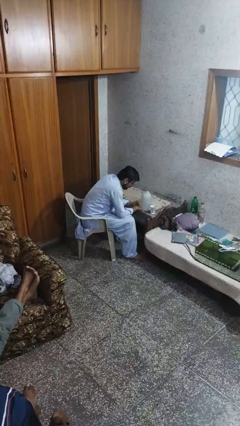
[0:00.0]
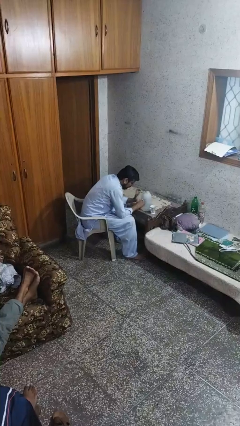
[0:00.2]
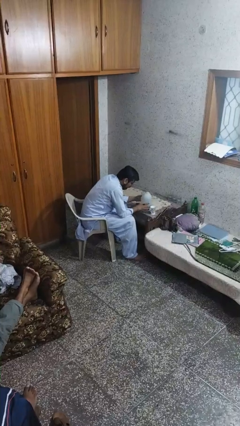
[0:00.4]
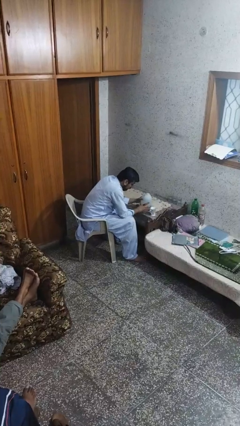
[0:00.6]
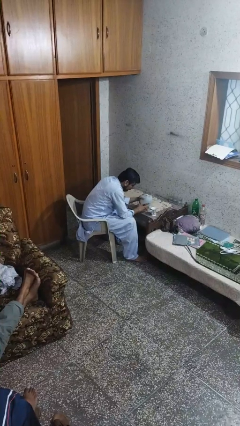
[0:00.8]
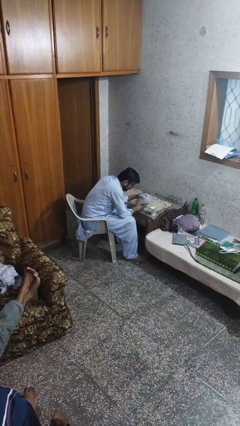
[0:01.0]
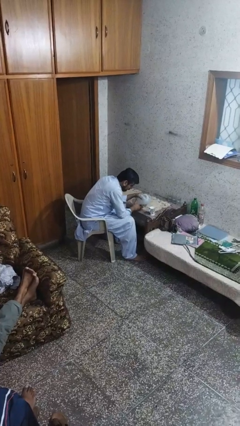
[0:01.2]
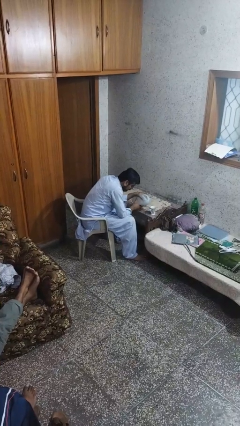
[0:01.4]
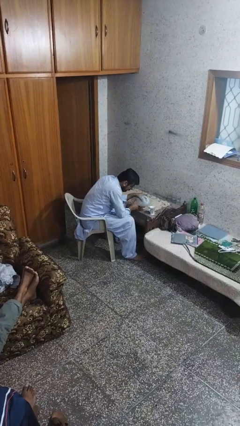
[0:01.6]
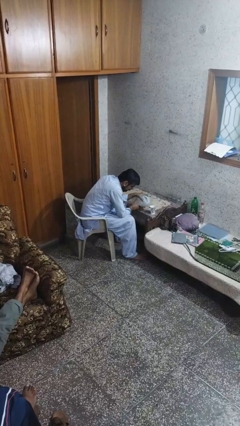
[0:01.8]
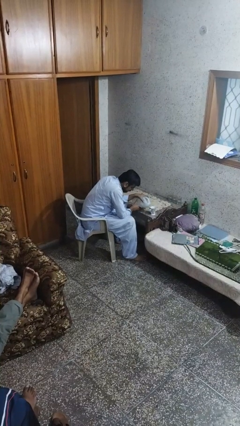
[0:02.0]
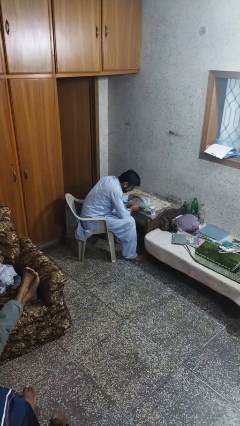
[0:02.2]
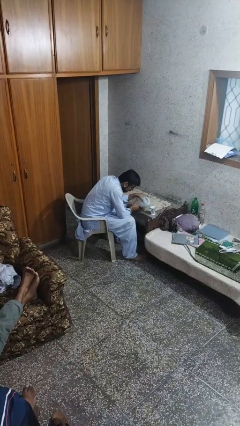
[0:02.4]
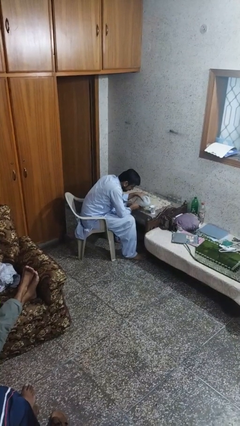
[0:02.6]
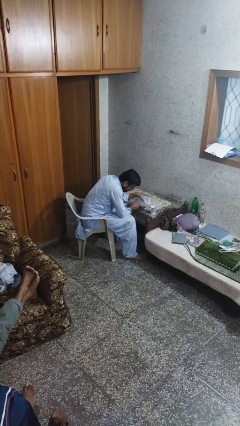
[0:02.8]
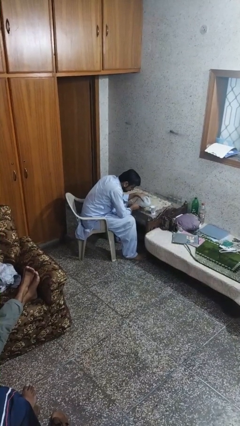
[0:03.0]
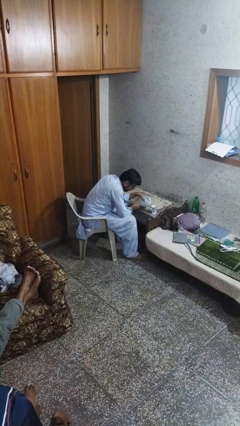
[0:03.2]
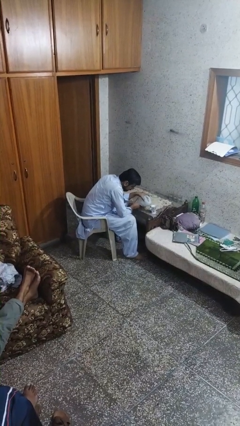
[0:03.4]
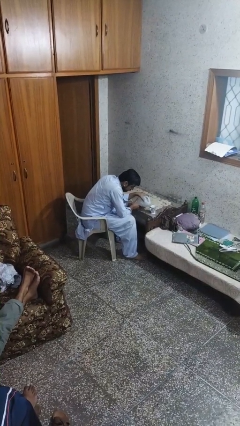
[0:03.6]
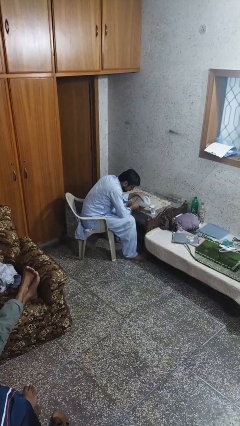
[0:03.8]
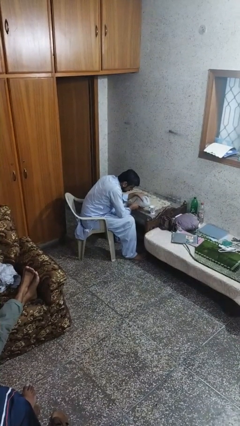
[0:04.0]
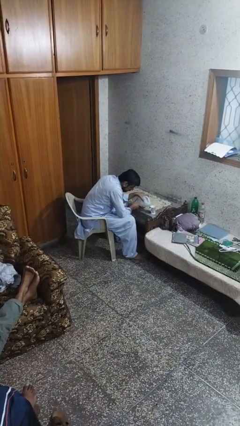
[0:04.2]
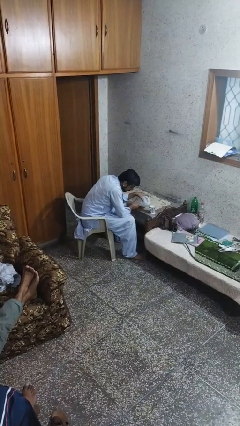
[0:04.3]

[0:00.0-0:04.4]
person pours liquid into cup

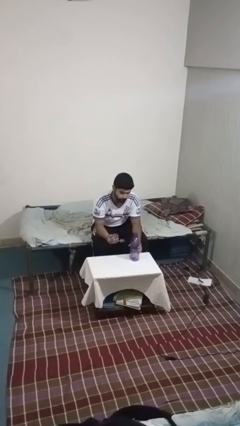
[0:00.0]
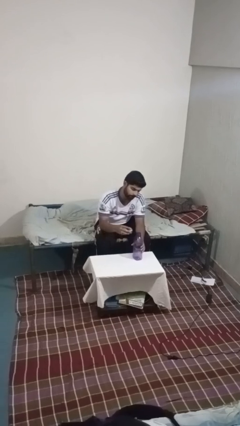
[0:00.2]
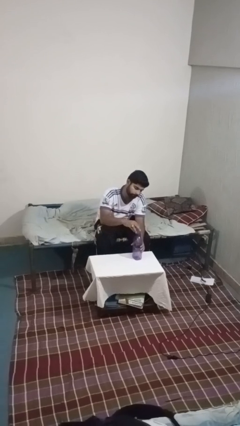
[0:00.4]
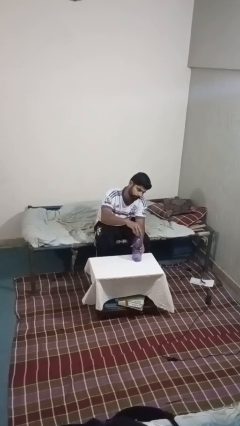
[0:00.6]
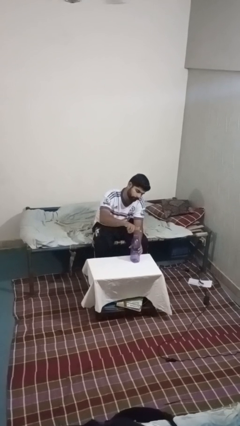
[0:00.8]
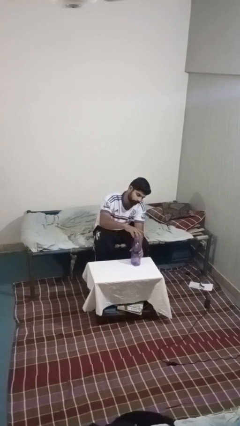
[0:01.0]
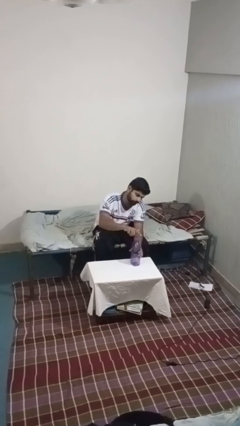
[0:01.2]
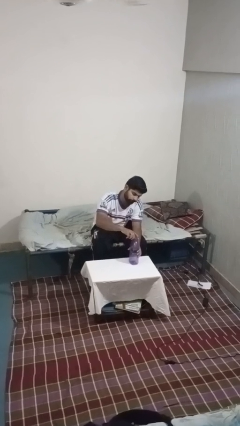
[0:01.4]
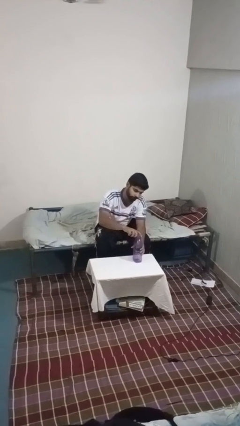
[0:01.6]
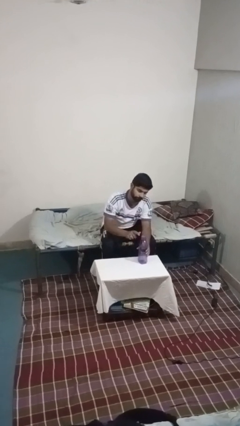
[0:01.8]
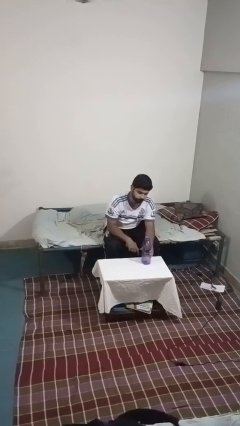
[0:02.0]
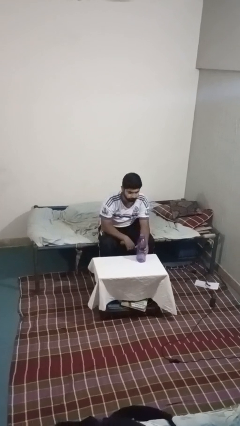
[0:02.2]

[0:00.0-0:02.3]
person screws lid to bottle

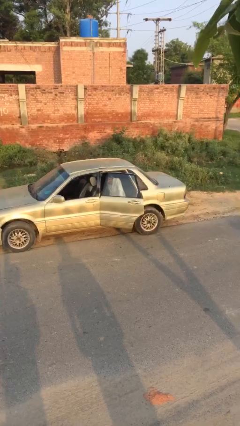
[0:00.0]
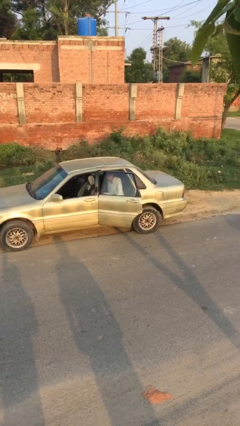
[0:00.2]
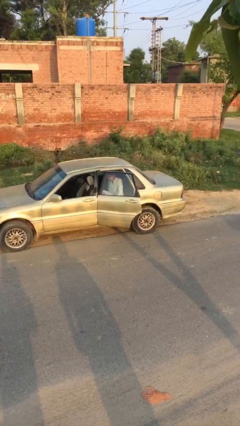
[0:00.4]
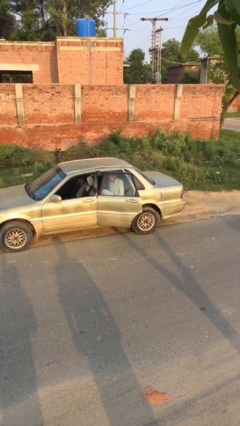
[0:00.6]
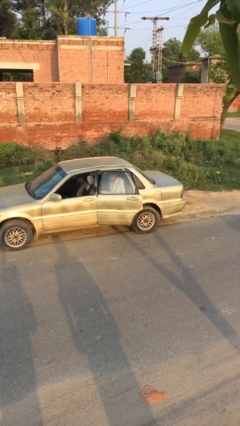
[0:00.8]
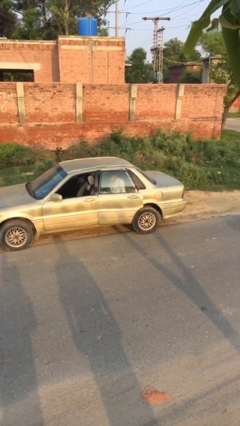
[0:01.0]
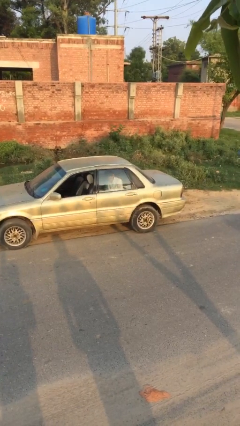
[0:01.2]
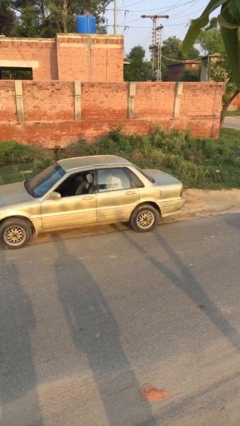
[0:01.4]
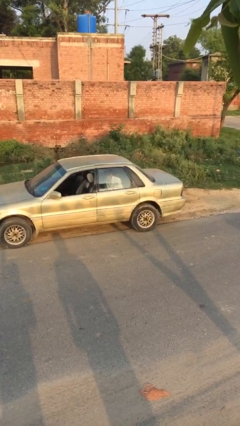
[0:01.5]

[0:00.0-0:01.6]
person closes car door

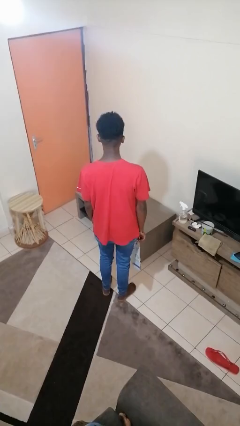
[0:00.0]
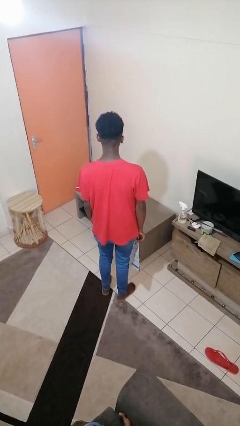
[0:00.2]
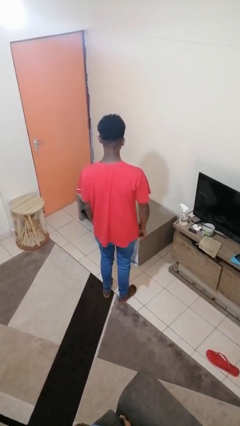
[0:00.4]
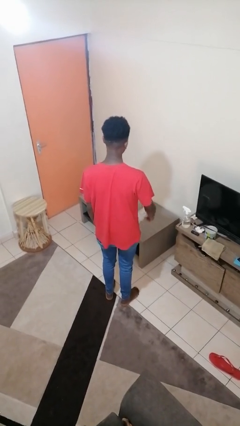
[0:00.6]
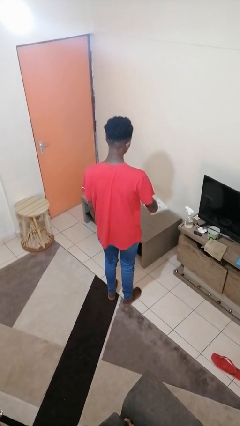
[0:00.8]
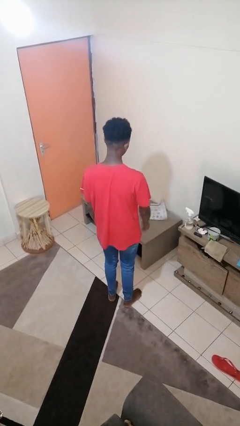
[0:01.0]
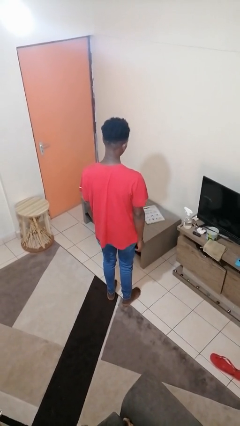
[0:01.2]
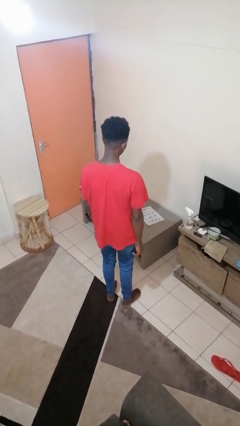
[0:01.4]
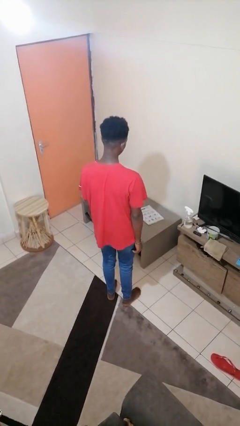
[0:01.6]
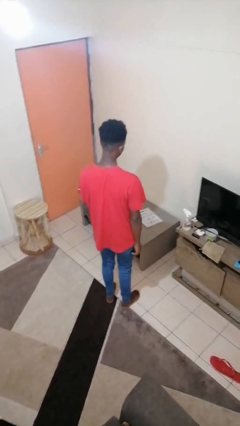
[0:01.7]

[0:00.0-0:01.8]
person throws object on table

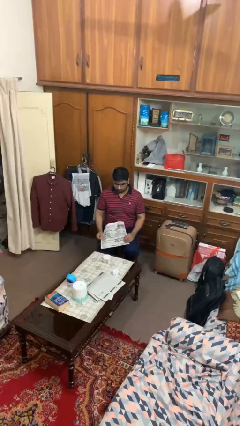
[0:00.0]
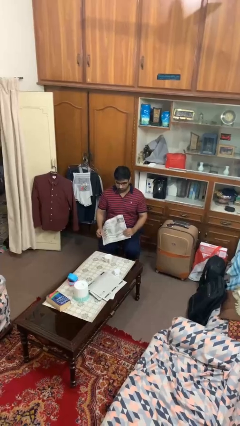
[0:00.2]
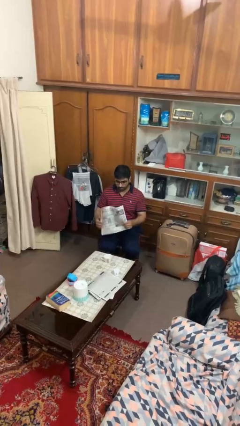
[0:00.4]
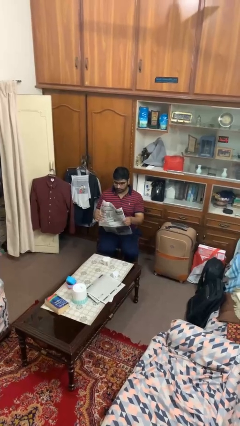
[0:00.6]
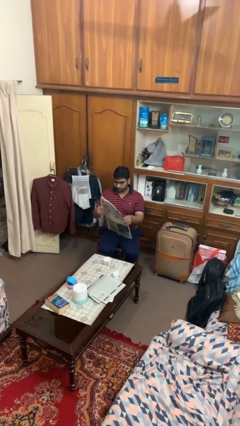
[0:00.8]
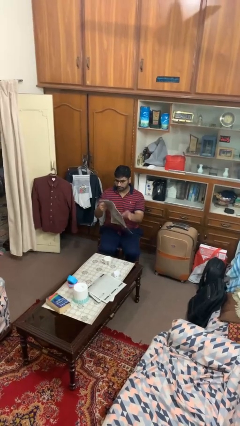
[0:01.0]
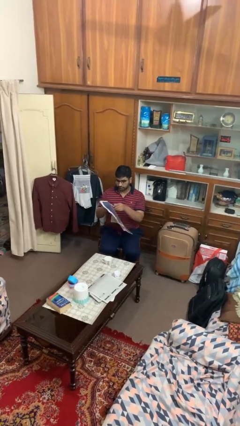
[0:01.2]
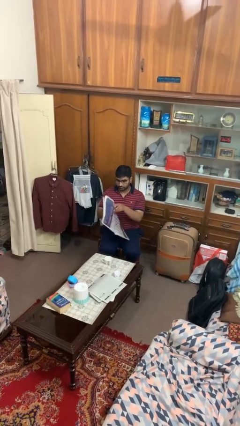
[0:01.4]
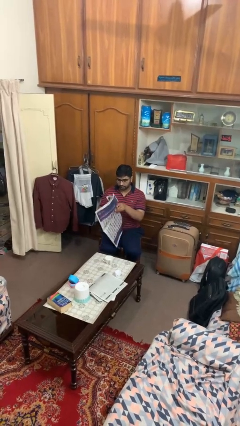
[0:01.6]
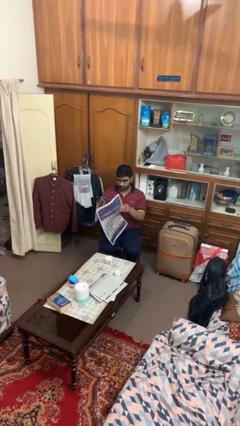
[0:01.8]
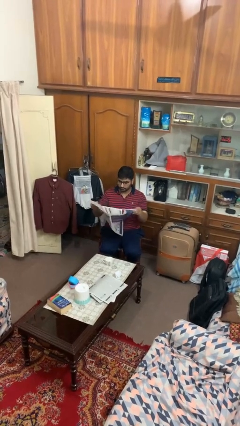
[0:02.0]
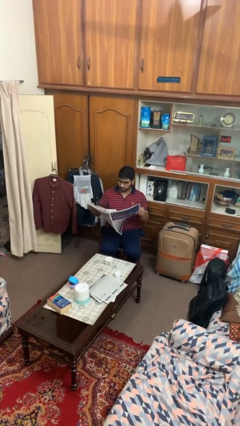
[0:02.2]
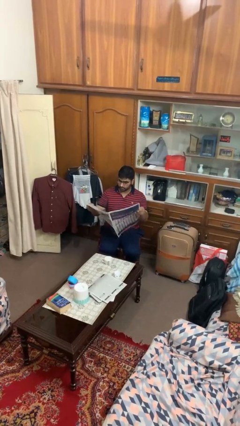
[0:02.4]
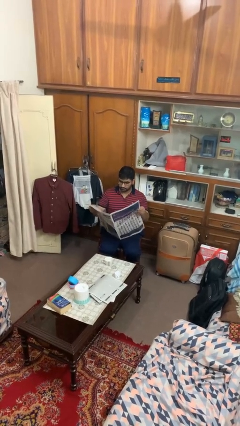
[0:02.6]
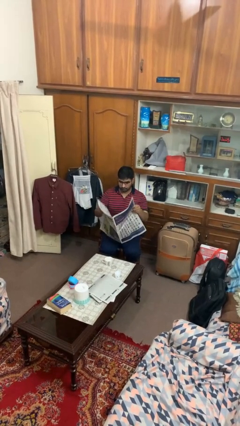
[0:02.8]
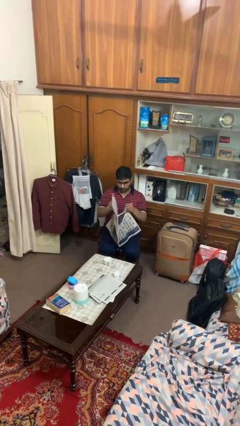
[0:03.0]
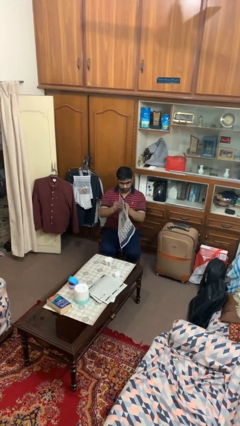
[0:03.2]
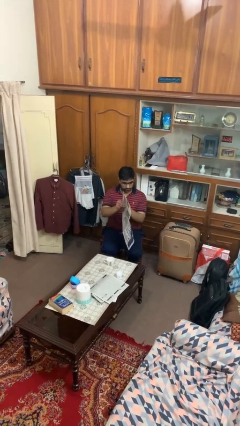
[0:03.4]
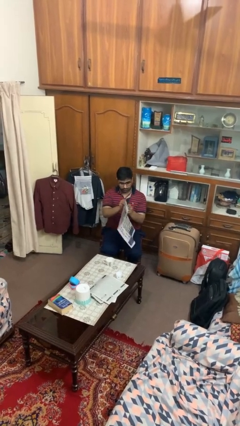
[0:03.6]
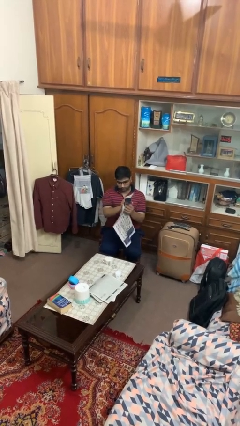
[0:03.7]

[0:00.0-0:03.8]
person reads newspaper

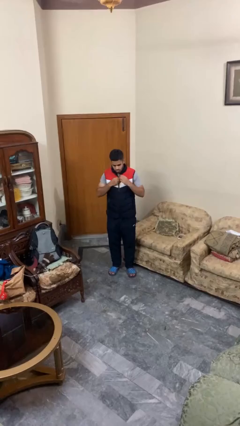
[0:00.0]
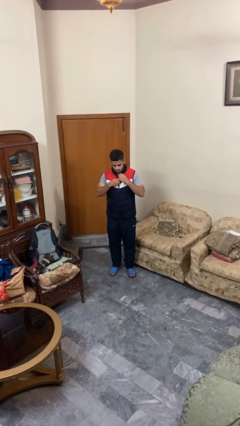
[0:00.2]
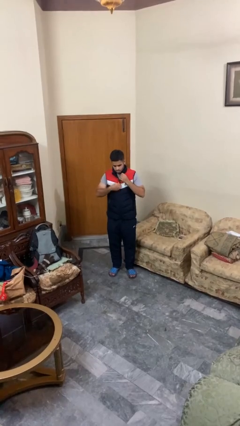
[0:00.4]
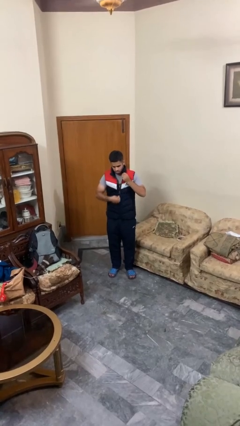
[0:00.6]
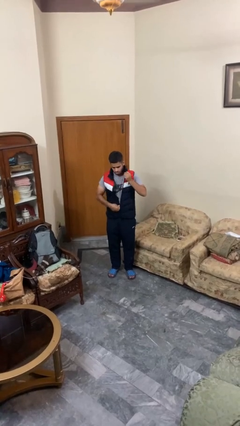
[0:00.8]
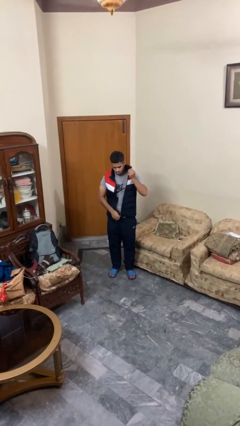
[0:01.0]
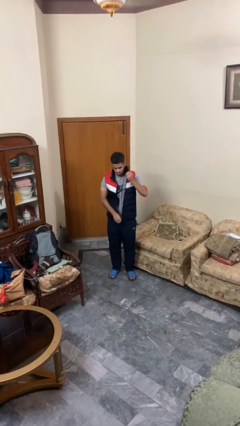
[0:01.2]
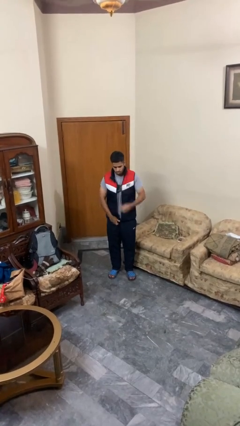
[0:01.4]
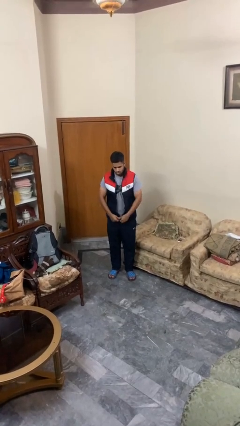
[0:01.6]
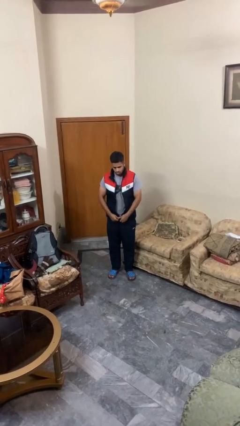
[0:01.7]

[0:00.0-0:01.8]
person unzips jacket

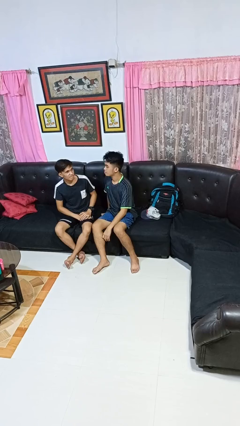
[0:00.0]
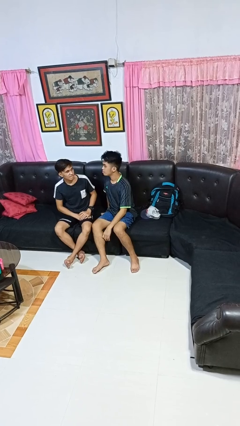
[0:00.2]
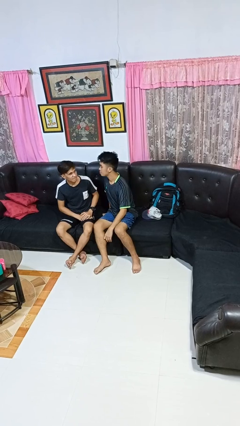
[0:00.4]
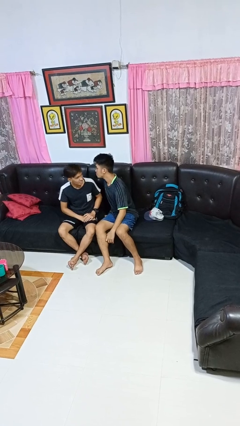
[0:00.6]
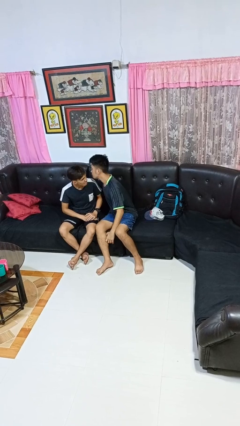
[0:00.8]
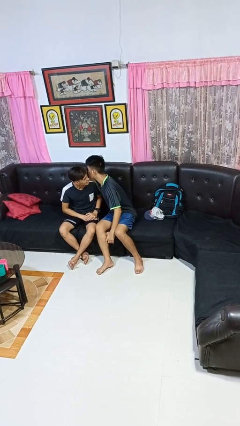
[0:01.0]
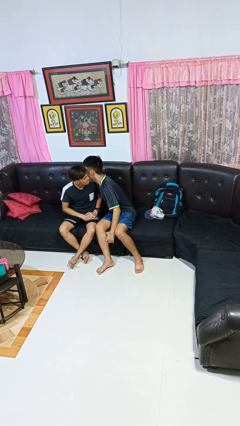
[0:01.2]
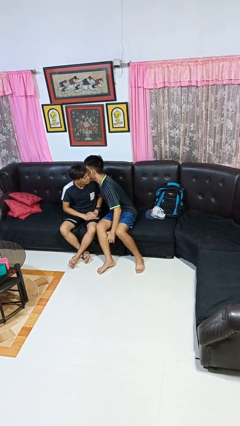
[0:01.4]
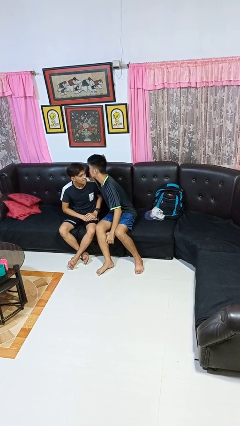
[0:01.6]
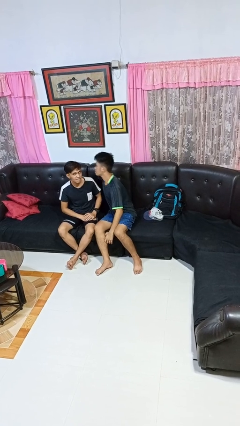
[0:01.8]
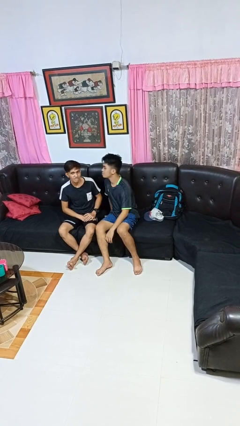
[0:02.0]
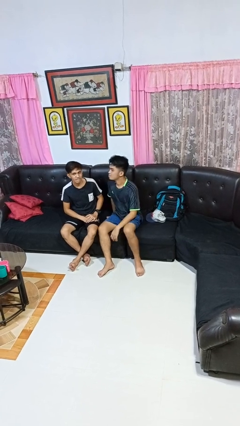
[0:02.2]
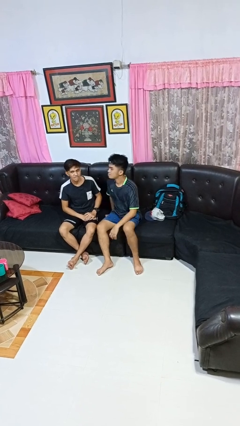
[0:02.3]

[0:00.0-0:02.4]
person kisses cheek of person
